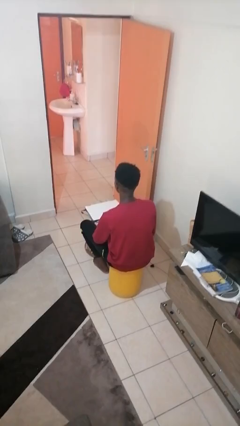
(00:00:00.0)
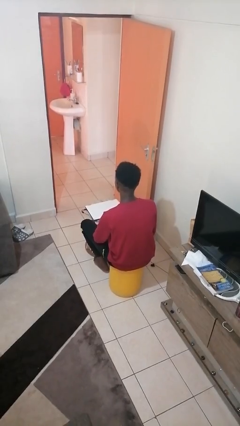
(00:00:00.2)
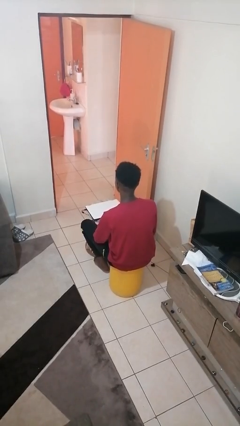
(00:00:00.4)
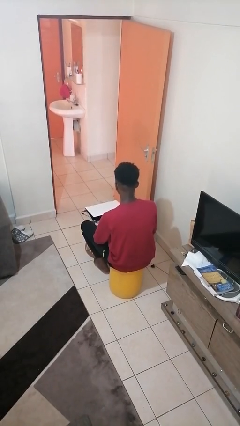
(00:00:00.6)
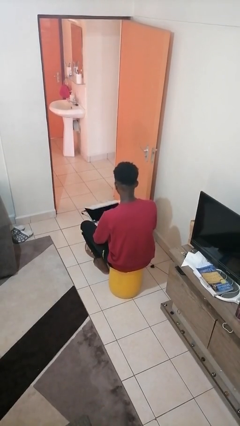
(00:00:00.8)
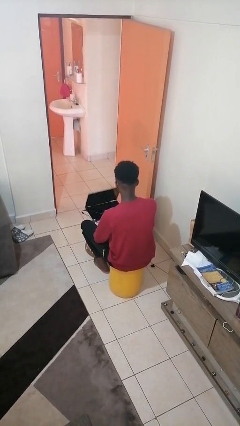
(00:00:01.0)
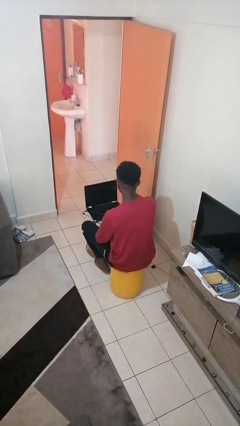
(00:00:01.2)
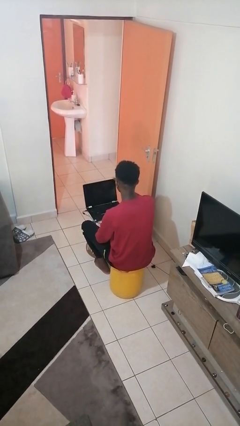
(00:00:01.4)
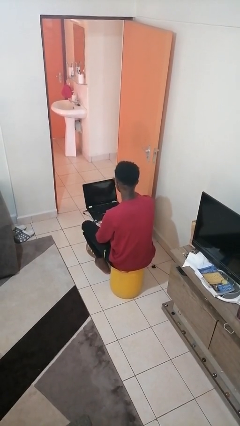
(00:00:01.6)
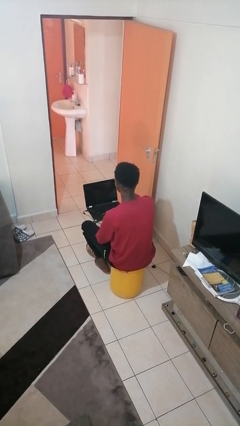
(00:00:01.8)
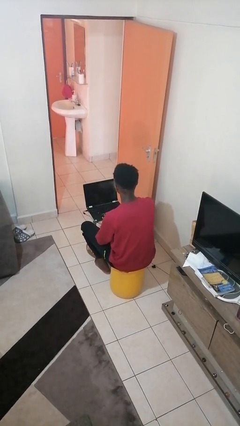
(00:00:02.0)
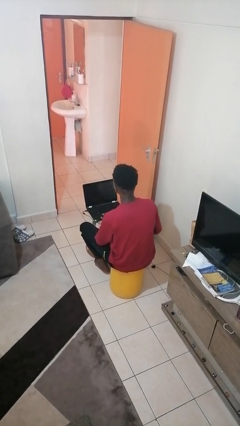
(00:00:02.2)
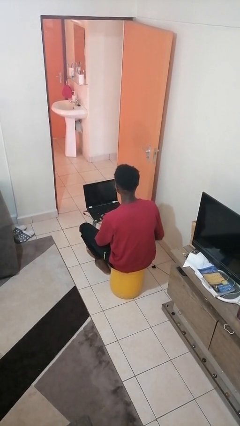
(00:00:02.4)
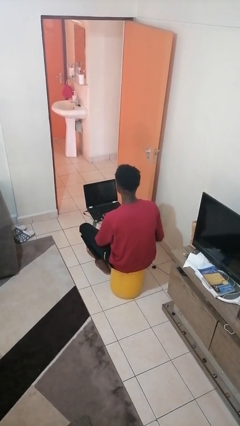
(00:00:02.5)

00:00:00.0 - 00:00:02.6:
person opens laptop

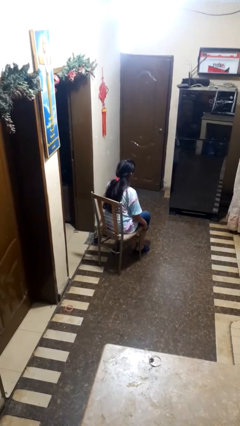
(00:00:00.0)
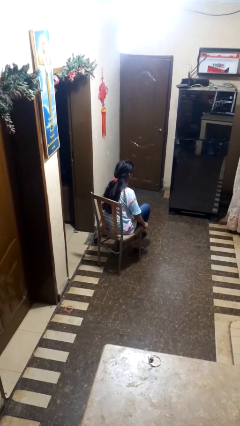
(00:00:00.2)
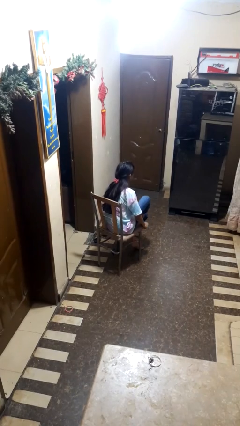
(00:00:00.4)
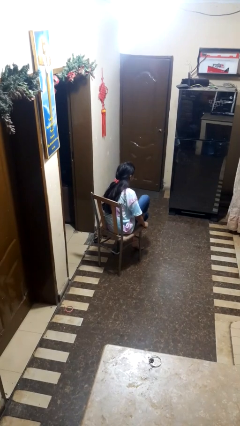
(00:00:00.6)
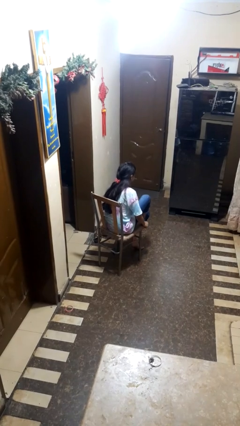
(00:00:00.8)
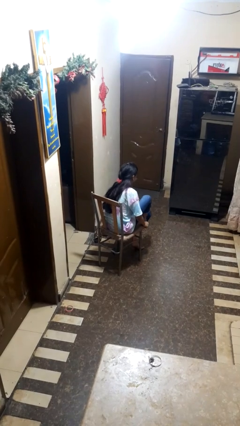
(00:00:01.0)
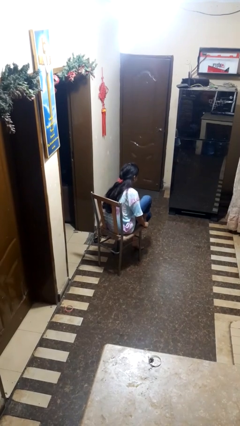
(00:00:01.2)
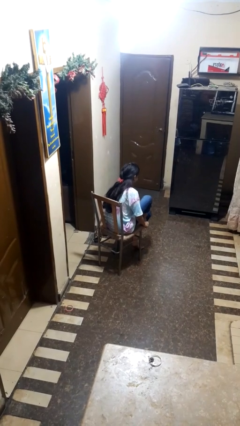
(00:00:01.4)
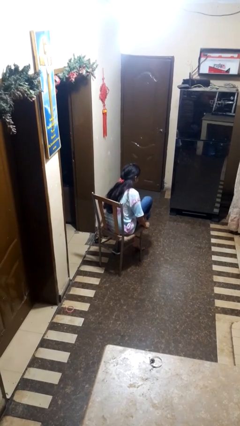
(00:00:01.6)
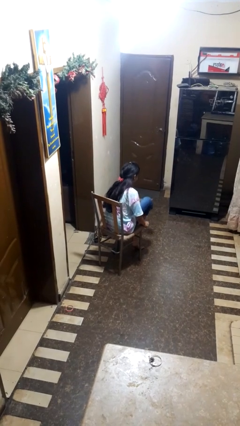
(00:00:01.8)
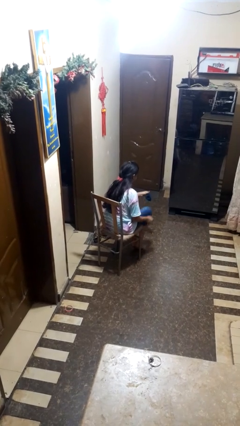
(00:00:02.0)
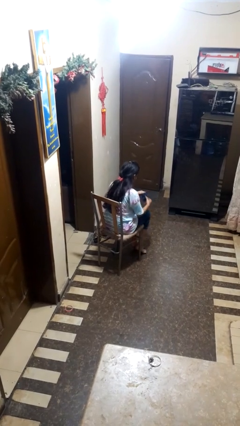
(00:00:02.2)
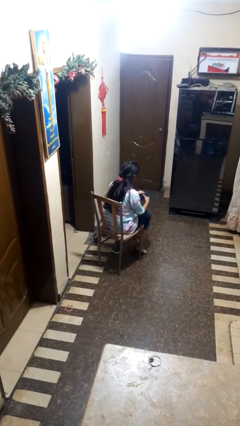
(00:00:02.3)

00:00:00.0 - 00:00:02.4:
person takes off socks

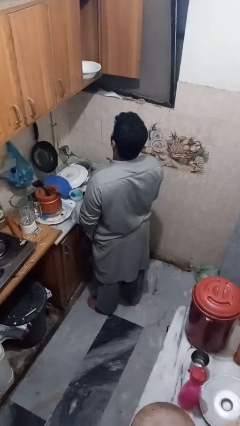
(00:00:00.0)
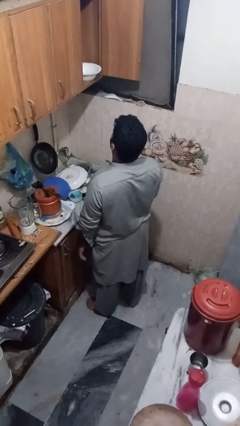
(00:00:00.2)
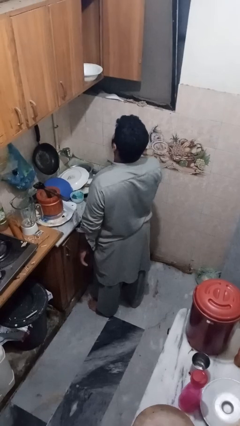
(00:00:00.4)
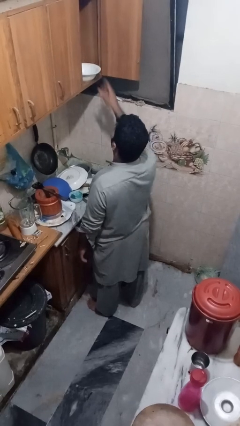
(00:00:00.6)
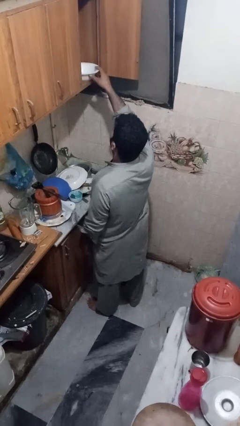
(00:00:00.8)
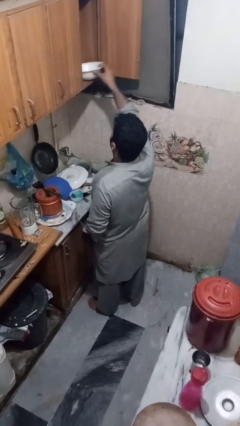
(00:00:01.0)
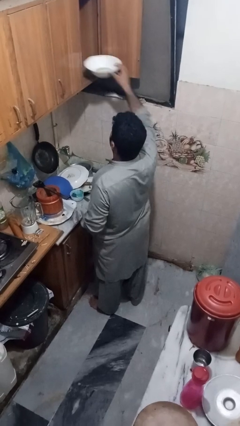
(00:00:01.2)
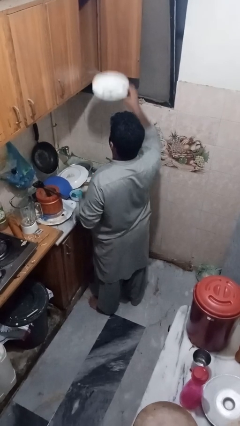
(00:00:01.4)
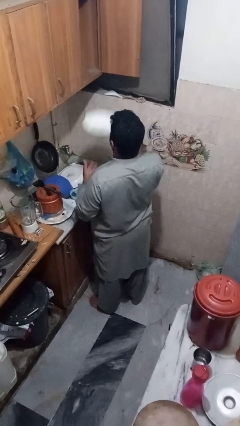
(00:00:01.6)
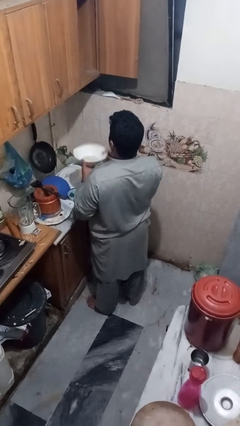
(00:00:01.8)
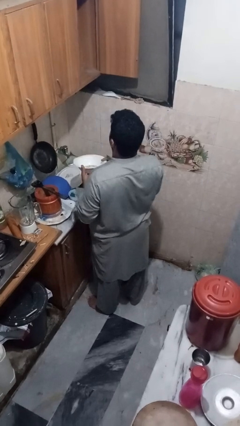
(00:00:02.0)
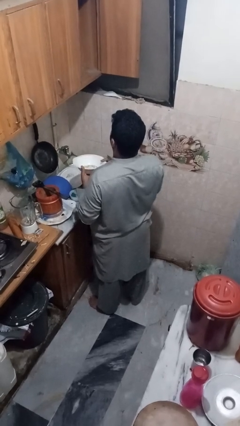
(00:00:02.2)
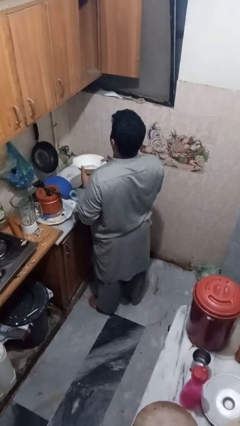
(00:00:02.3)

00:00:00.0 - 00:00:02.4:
person takes object from cabinet

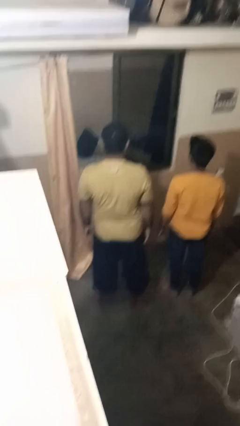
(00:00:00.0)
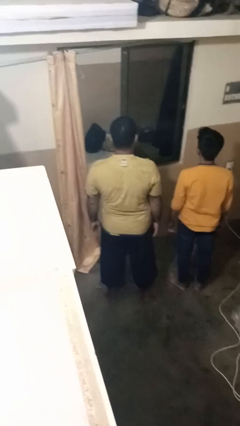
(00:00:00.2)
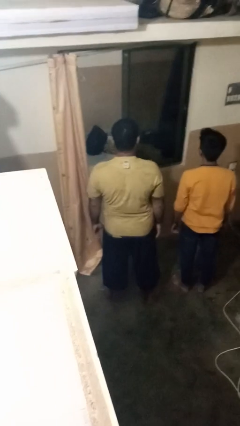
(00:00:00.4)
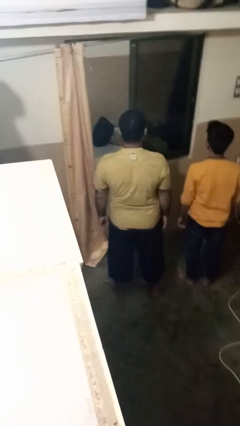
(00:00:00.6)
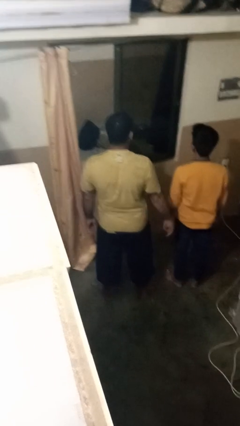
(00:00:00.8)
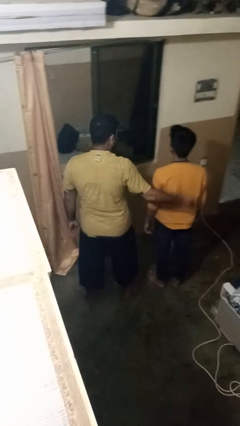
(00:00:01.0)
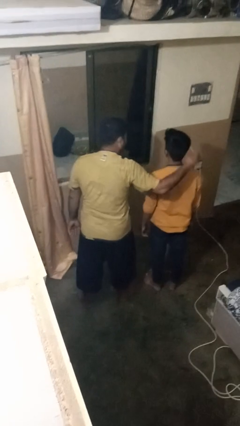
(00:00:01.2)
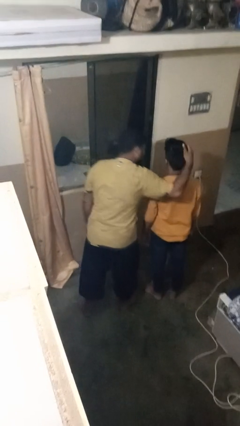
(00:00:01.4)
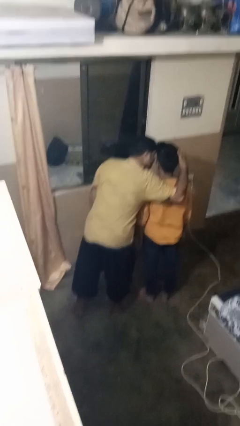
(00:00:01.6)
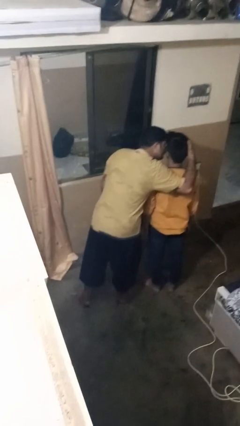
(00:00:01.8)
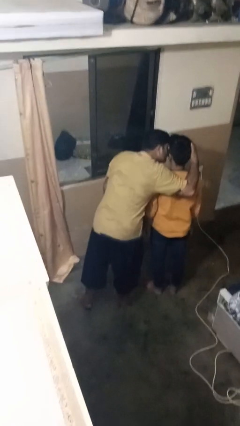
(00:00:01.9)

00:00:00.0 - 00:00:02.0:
person kisses cheek of person

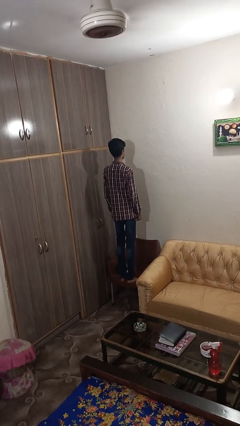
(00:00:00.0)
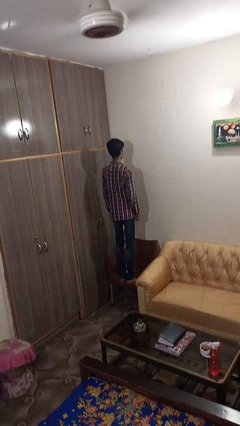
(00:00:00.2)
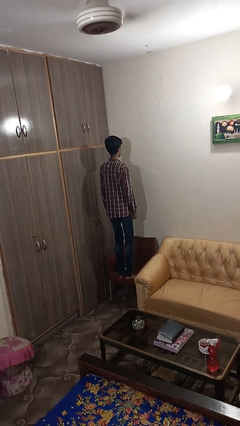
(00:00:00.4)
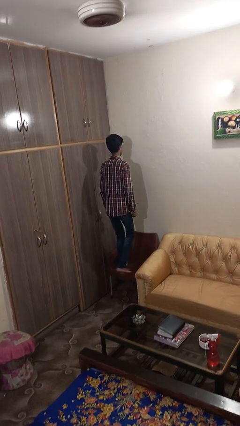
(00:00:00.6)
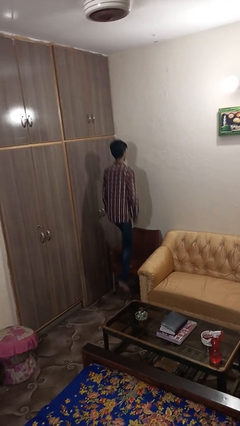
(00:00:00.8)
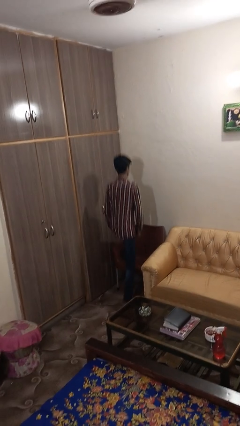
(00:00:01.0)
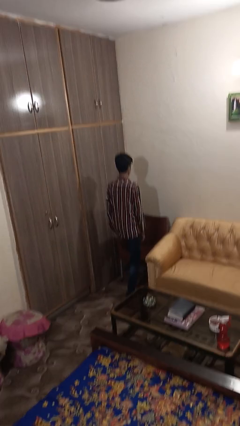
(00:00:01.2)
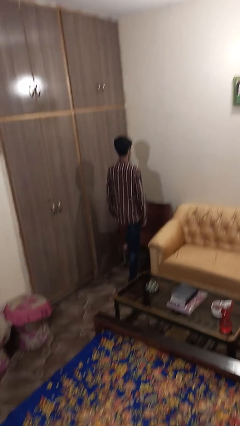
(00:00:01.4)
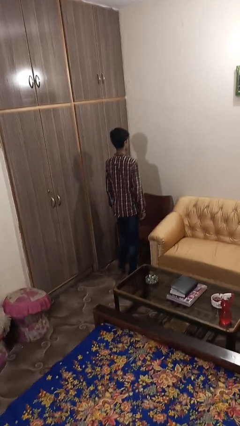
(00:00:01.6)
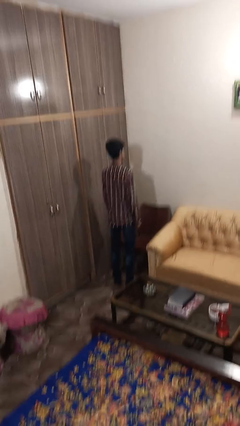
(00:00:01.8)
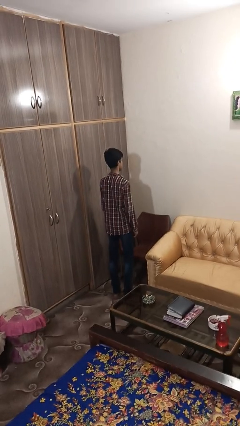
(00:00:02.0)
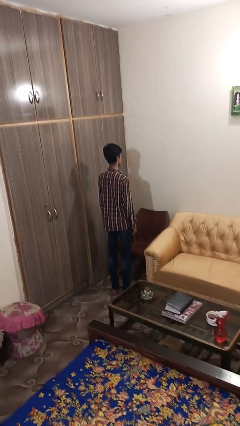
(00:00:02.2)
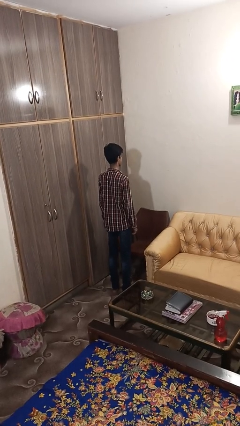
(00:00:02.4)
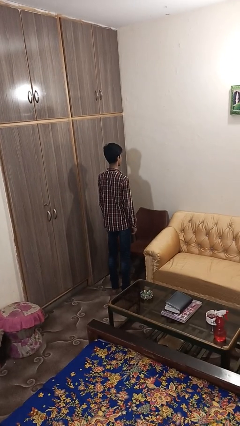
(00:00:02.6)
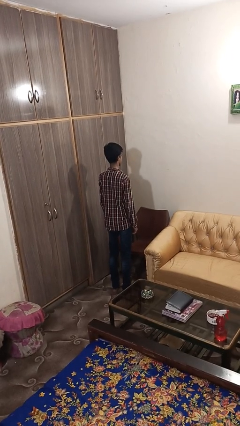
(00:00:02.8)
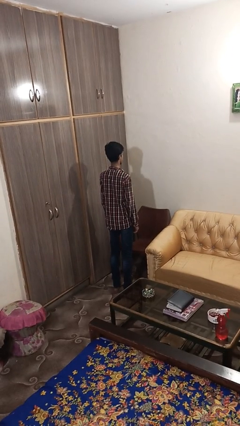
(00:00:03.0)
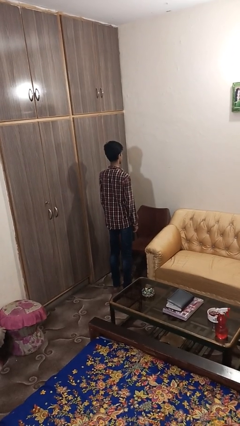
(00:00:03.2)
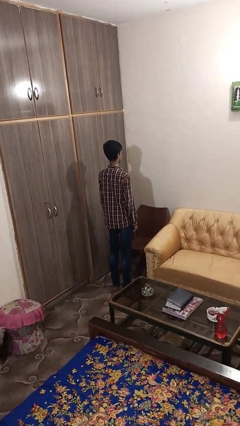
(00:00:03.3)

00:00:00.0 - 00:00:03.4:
person climbs off chair

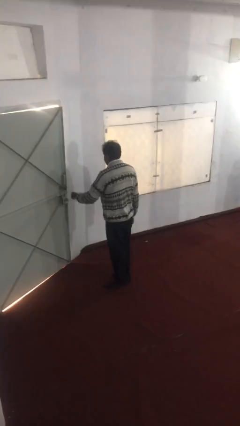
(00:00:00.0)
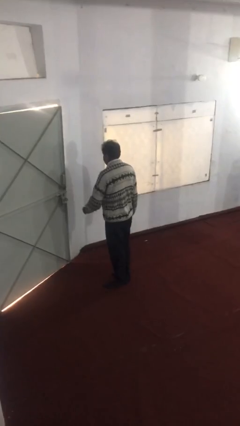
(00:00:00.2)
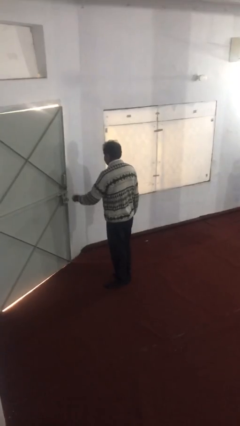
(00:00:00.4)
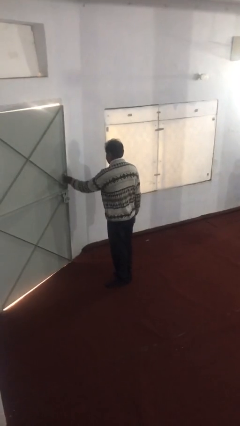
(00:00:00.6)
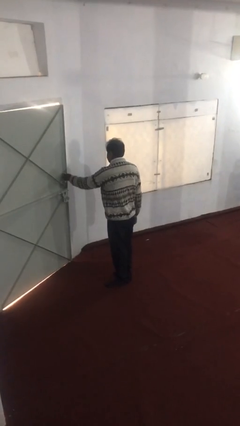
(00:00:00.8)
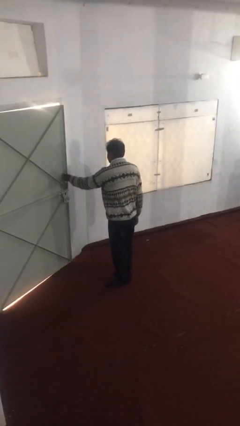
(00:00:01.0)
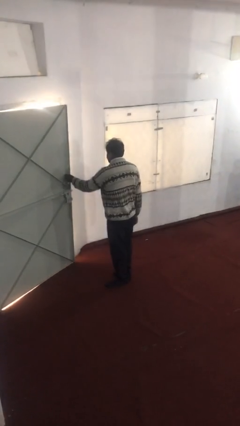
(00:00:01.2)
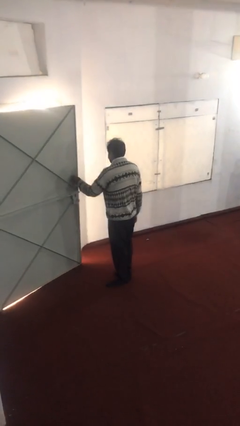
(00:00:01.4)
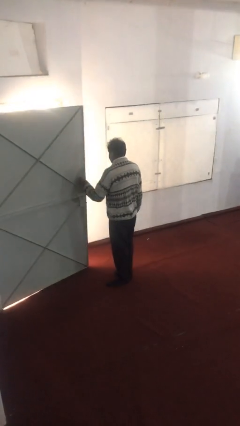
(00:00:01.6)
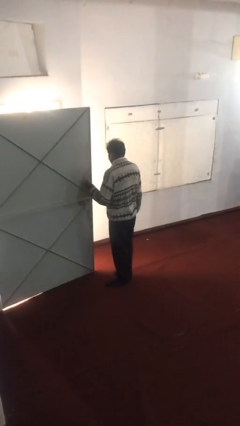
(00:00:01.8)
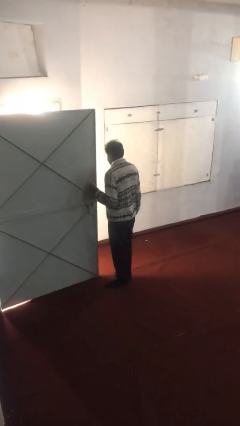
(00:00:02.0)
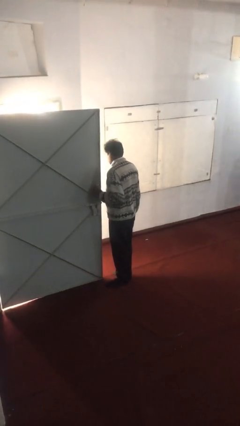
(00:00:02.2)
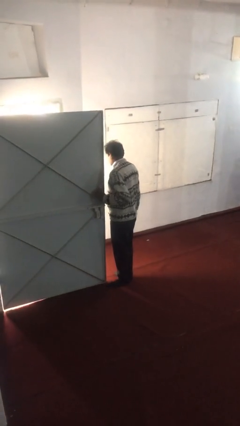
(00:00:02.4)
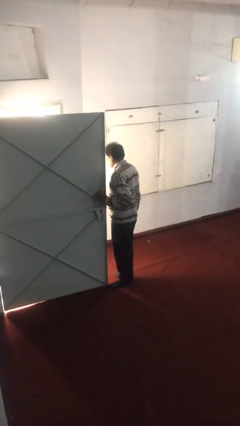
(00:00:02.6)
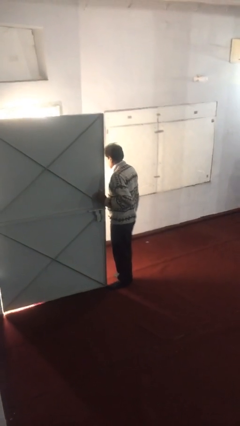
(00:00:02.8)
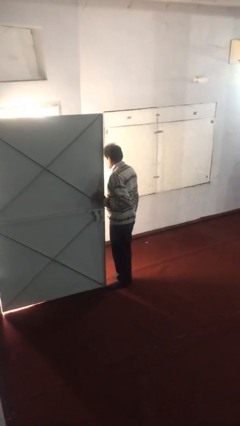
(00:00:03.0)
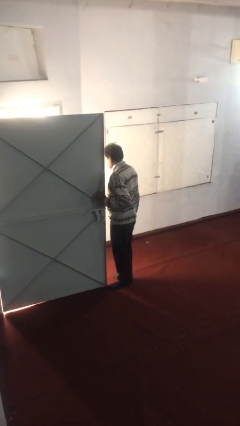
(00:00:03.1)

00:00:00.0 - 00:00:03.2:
person opens facility door

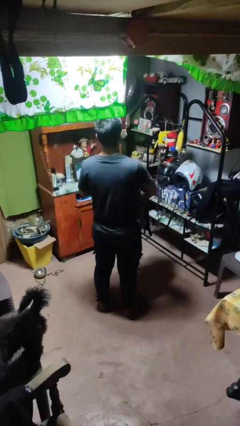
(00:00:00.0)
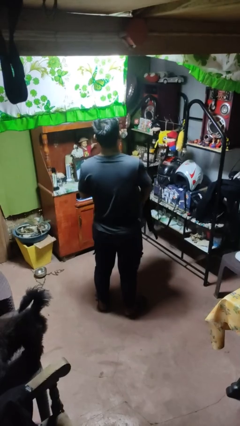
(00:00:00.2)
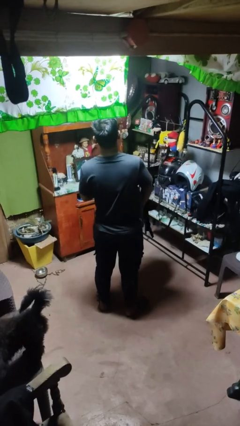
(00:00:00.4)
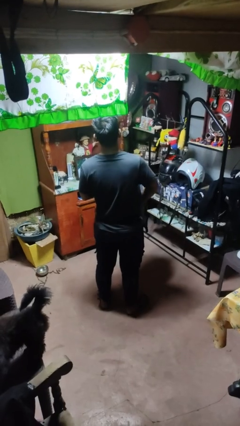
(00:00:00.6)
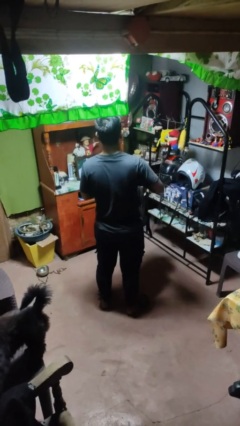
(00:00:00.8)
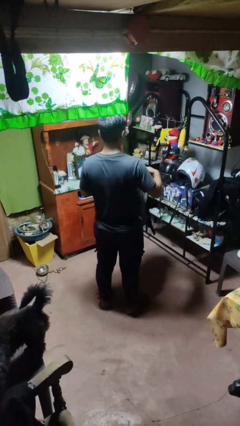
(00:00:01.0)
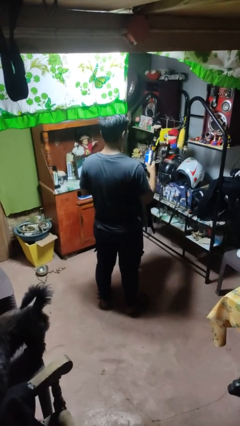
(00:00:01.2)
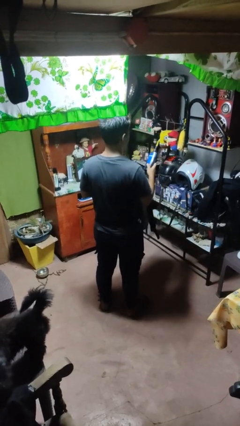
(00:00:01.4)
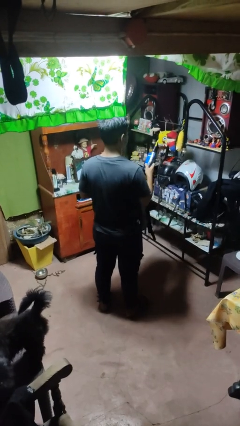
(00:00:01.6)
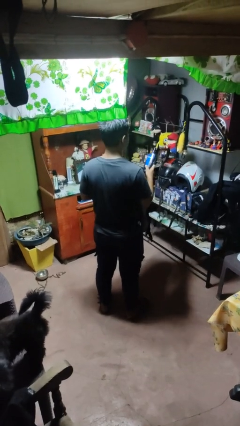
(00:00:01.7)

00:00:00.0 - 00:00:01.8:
person takes object from bag
